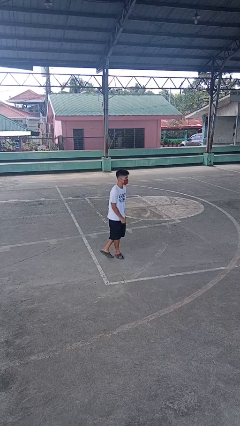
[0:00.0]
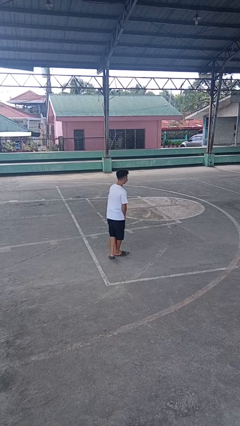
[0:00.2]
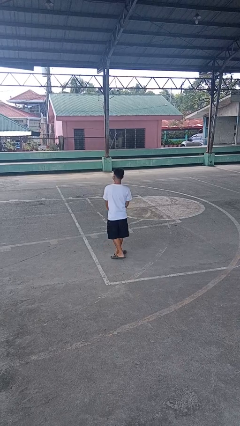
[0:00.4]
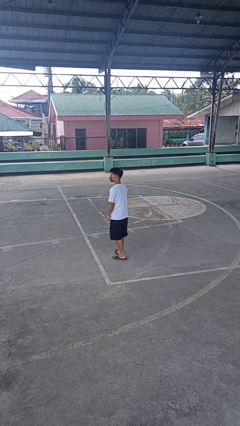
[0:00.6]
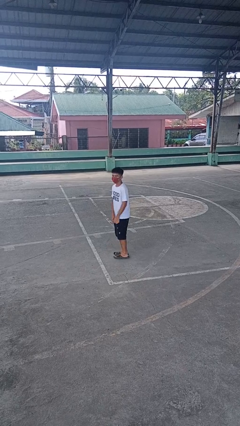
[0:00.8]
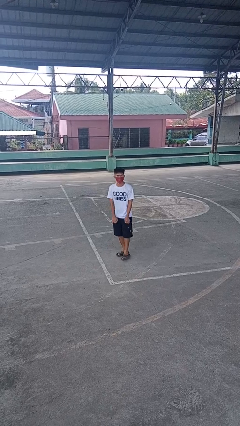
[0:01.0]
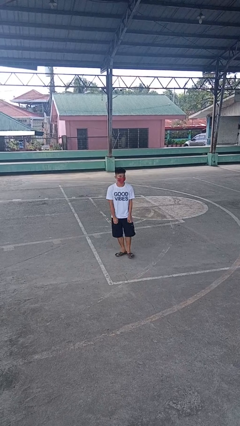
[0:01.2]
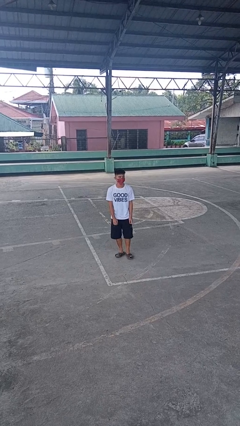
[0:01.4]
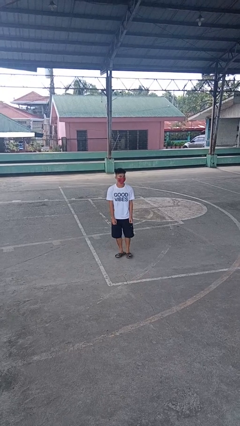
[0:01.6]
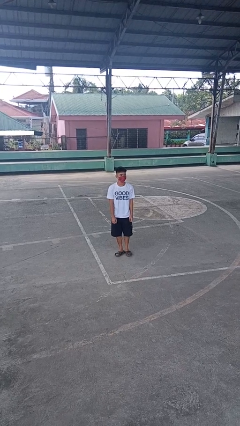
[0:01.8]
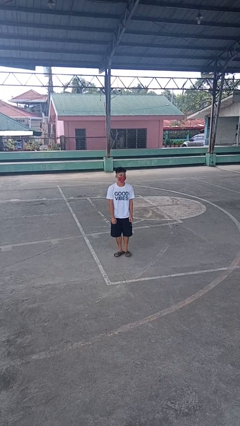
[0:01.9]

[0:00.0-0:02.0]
person twirls

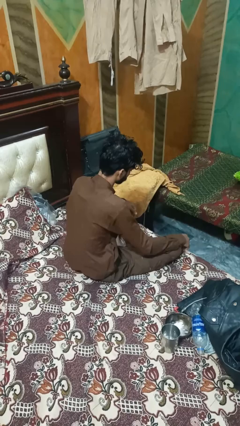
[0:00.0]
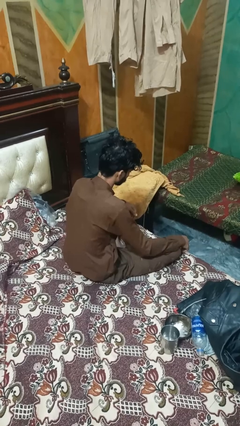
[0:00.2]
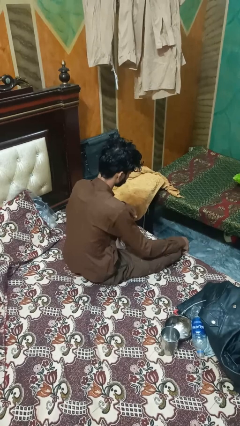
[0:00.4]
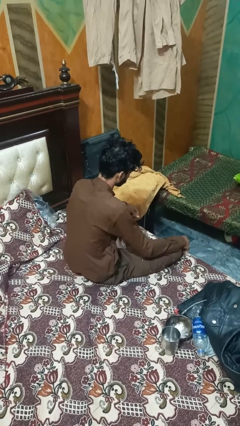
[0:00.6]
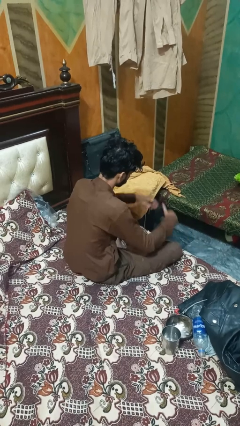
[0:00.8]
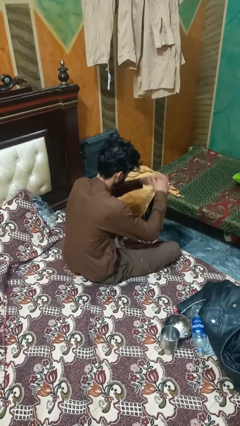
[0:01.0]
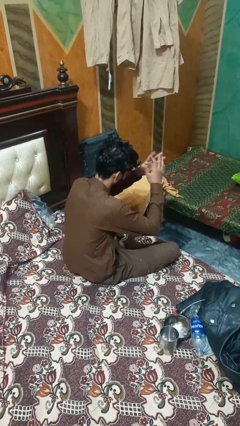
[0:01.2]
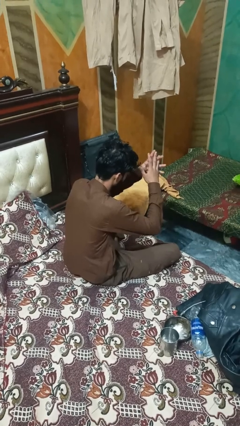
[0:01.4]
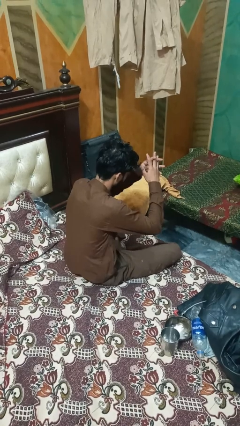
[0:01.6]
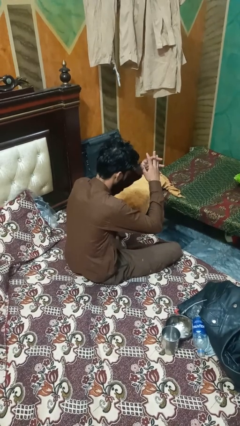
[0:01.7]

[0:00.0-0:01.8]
person snaps fingers

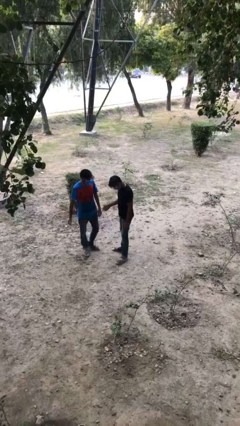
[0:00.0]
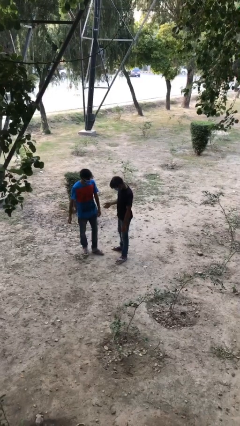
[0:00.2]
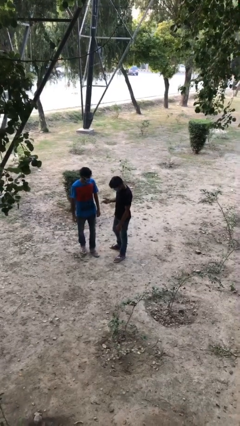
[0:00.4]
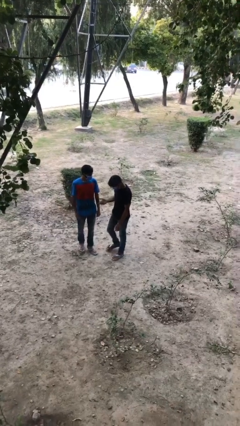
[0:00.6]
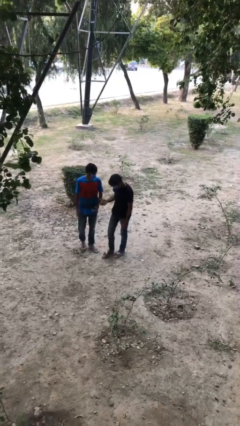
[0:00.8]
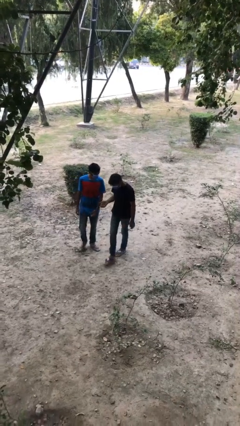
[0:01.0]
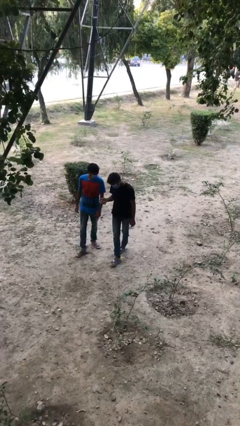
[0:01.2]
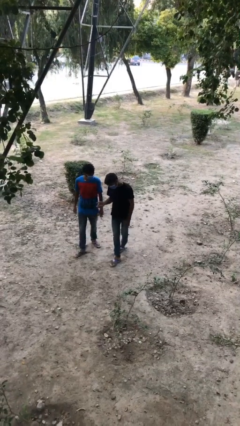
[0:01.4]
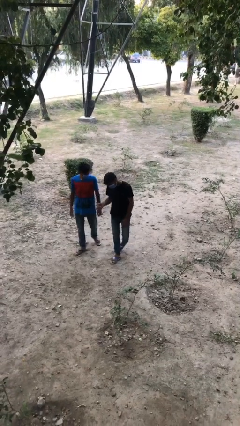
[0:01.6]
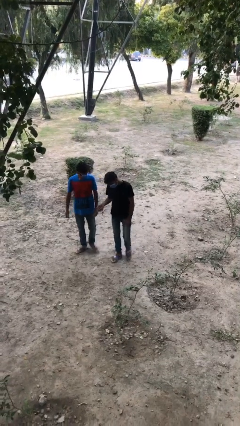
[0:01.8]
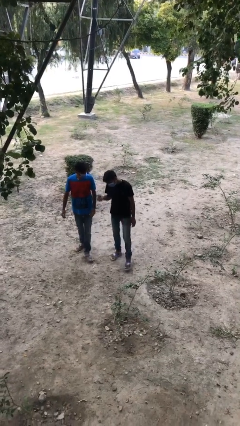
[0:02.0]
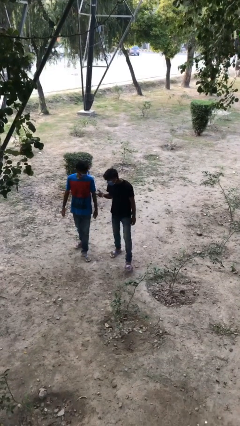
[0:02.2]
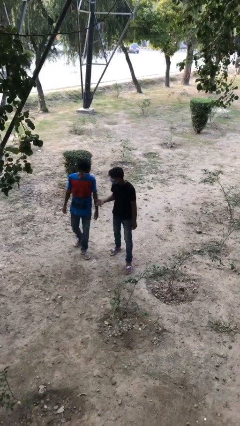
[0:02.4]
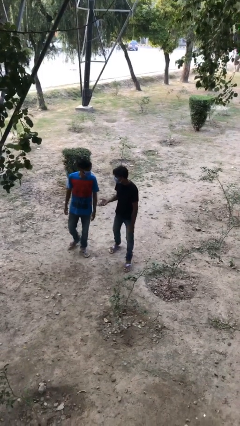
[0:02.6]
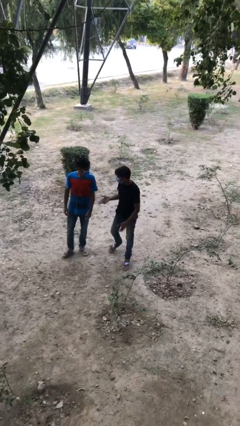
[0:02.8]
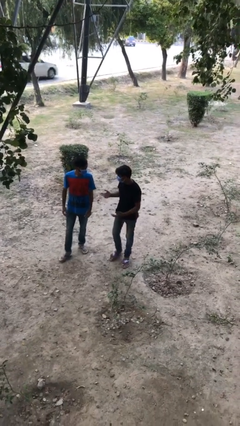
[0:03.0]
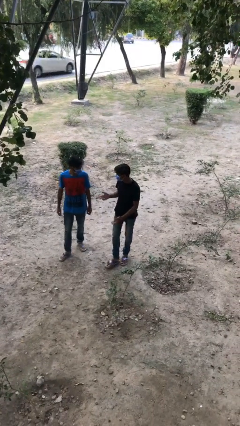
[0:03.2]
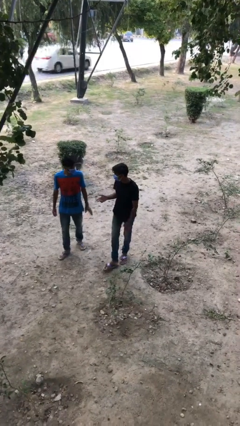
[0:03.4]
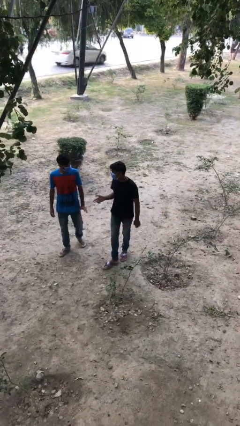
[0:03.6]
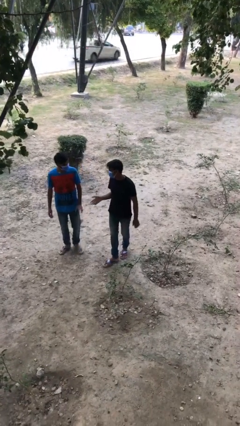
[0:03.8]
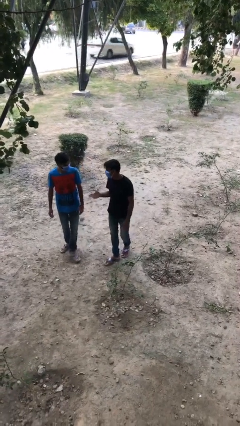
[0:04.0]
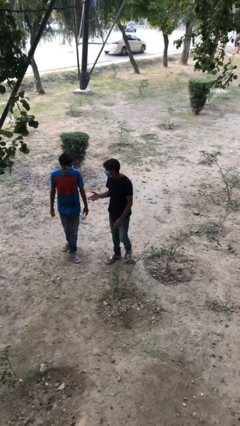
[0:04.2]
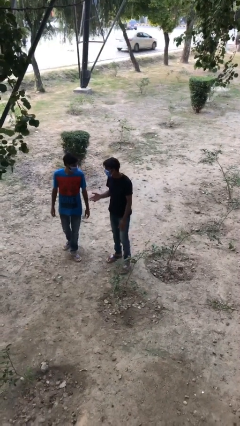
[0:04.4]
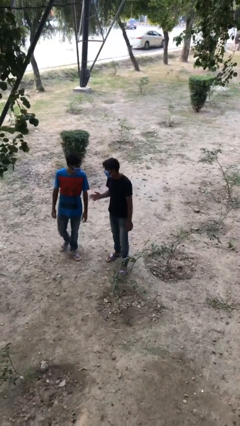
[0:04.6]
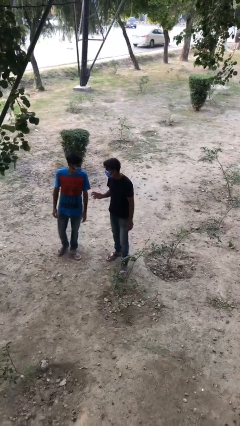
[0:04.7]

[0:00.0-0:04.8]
person talks to person

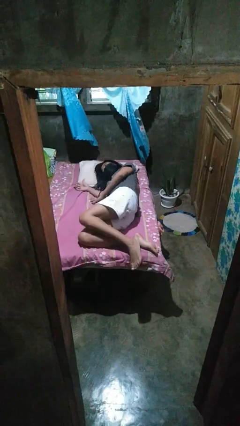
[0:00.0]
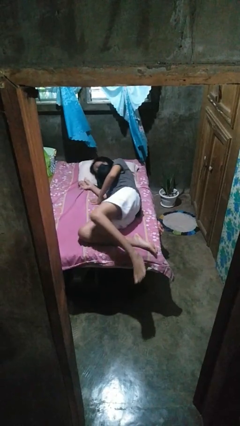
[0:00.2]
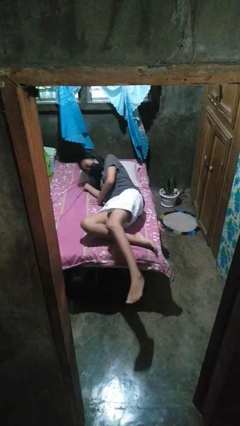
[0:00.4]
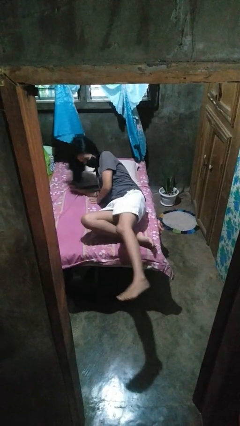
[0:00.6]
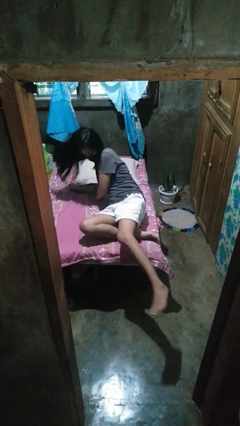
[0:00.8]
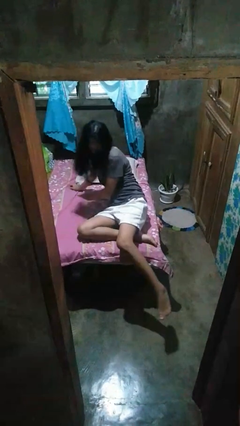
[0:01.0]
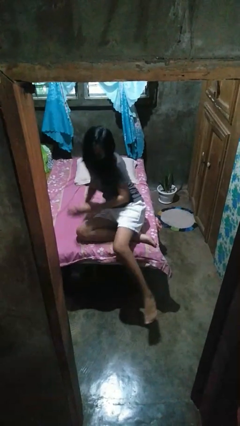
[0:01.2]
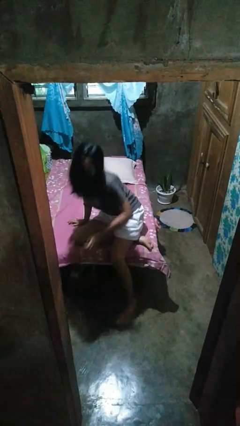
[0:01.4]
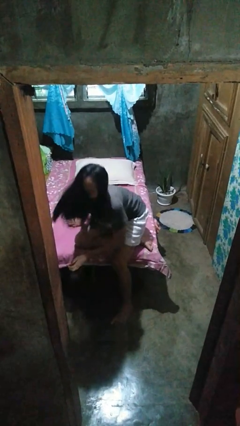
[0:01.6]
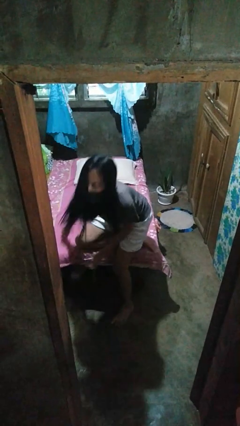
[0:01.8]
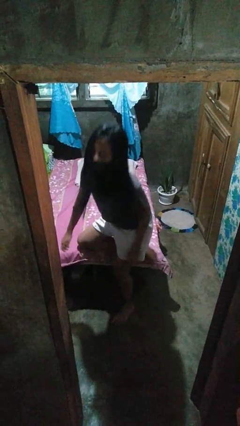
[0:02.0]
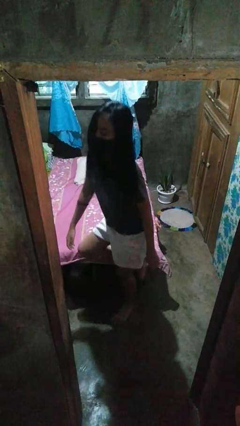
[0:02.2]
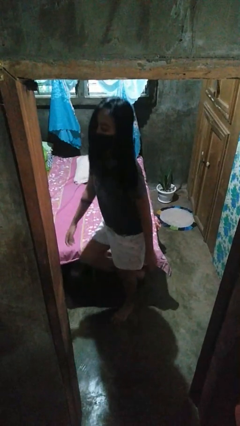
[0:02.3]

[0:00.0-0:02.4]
person stands up

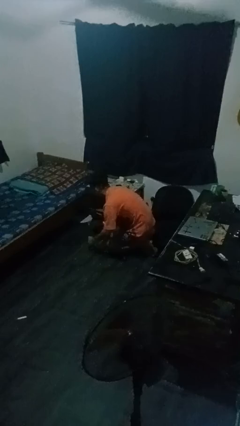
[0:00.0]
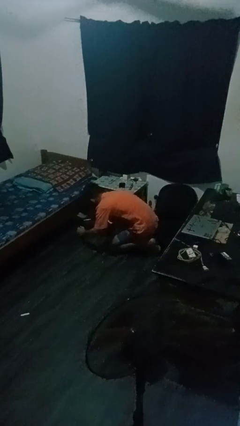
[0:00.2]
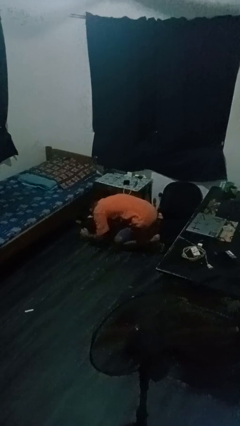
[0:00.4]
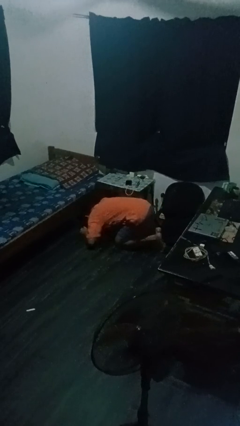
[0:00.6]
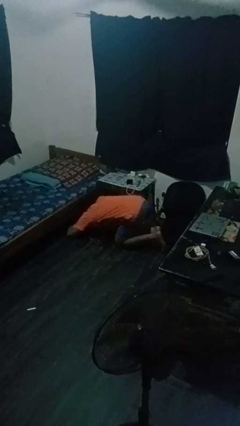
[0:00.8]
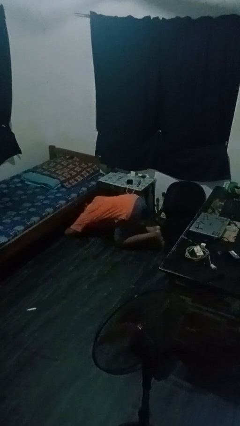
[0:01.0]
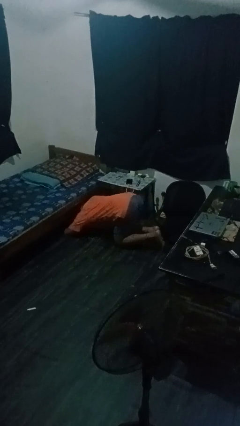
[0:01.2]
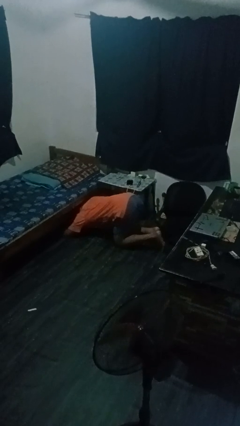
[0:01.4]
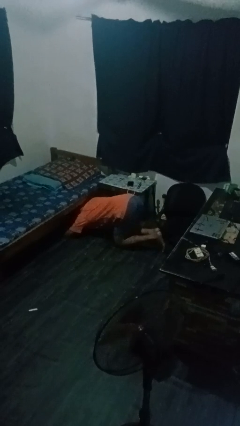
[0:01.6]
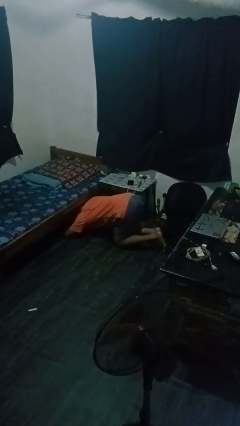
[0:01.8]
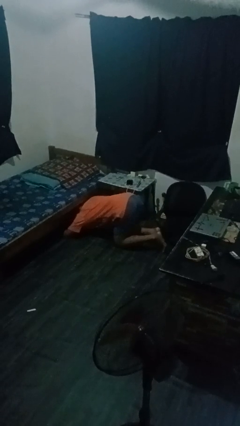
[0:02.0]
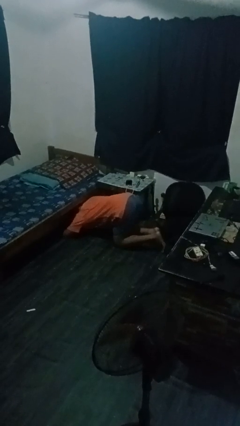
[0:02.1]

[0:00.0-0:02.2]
person searches under bed

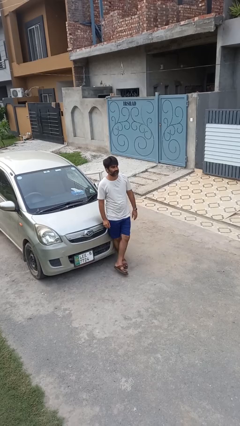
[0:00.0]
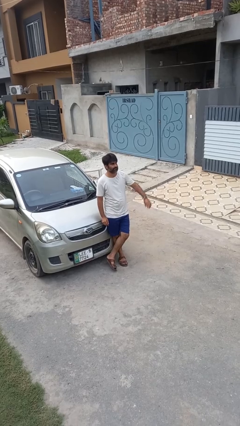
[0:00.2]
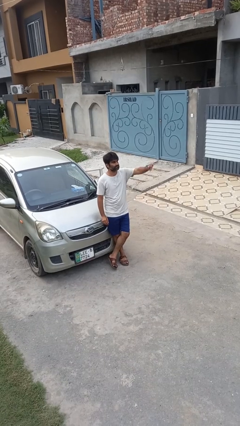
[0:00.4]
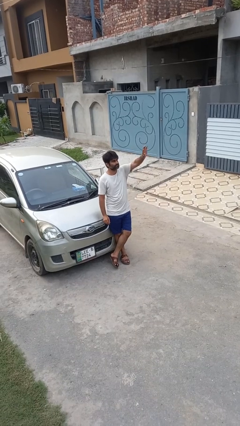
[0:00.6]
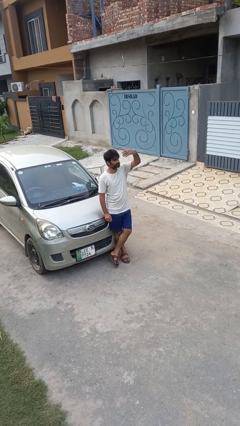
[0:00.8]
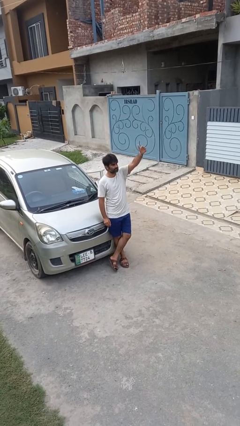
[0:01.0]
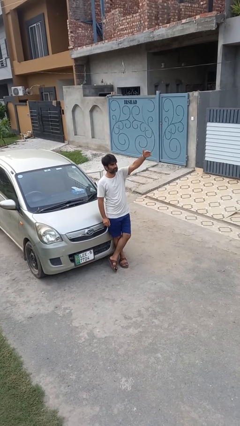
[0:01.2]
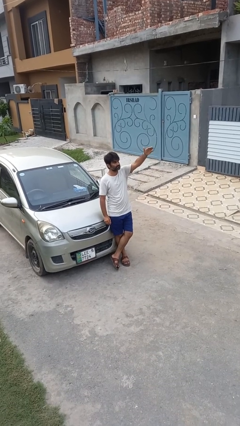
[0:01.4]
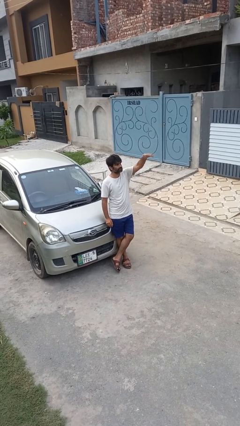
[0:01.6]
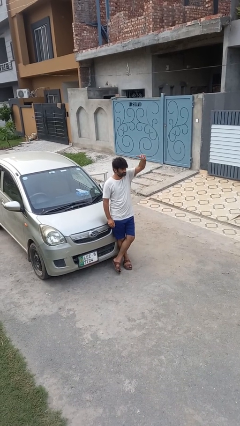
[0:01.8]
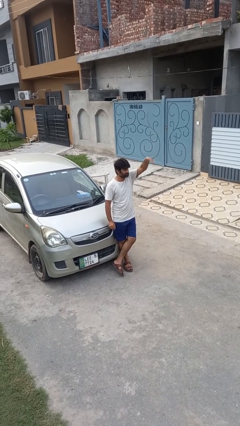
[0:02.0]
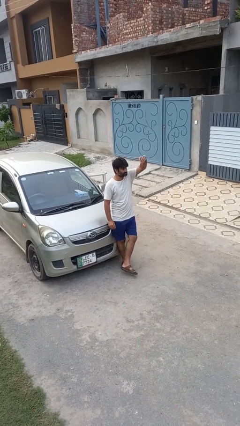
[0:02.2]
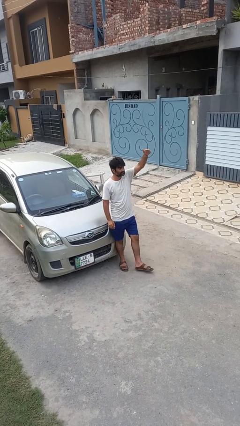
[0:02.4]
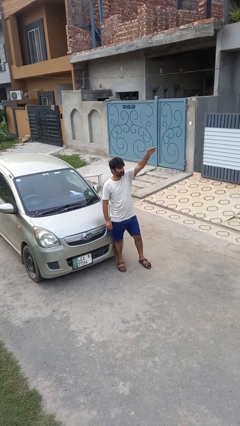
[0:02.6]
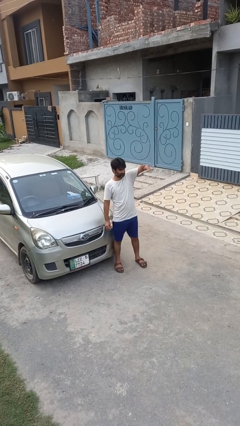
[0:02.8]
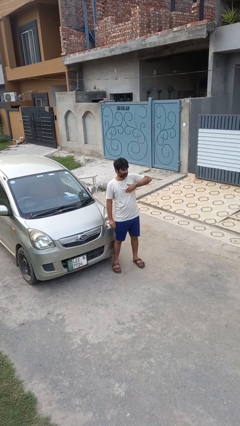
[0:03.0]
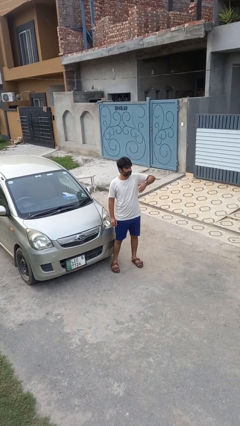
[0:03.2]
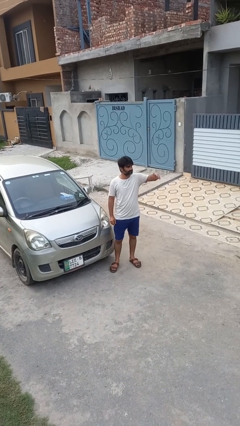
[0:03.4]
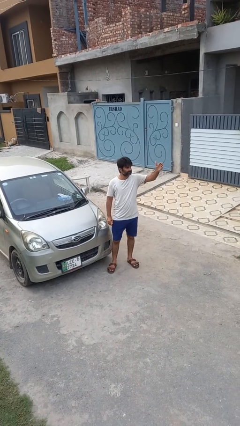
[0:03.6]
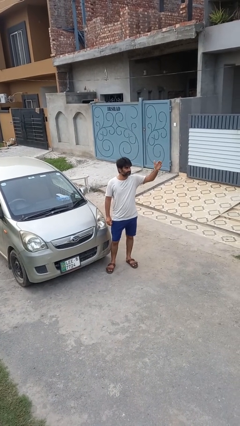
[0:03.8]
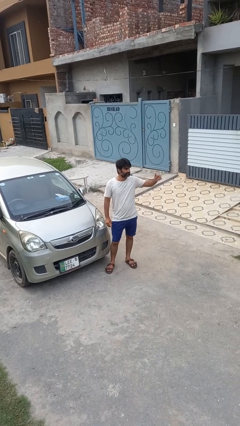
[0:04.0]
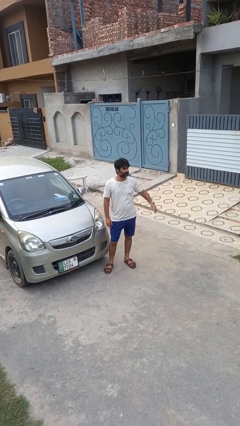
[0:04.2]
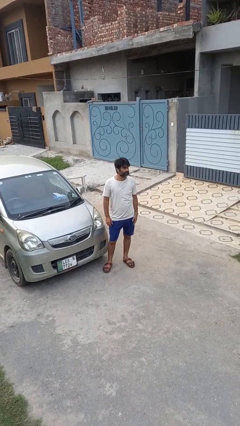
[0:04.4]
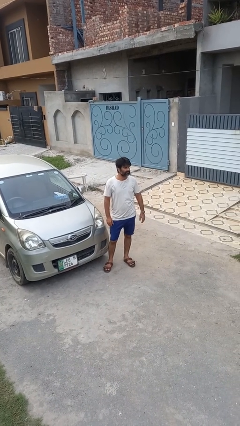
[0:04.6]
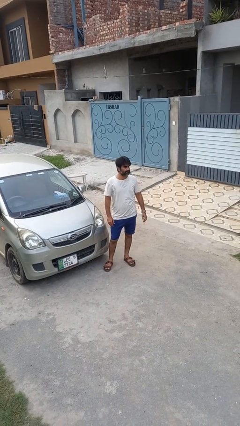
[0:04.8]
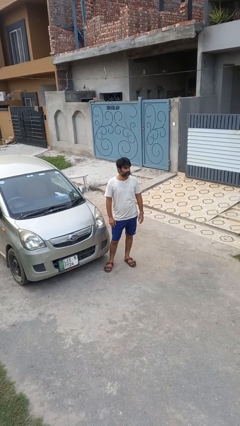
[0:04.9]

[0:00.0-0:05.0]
person gestures come here
